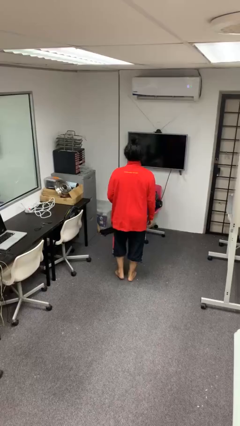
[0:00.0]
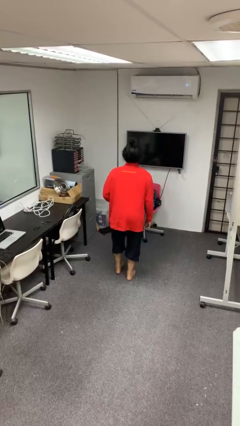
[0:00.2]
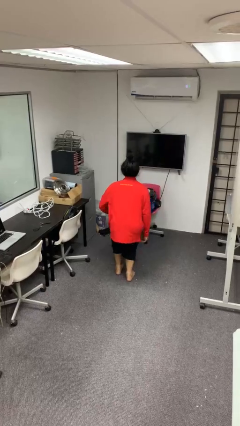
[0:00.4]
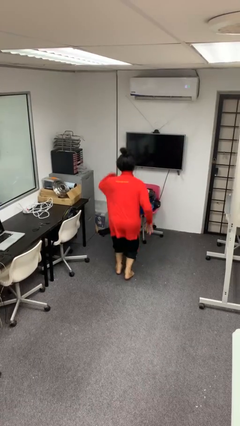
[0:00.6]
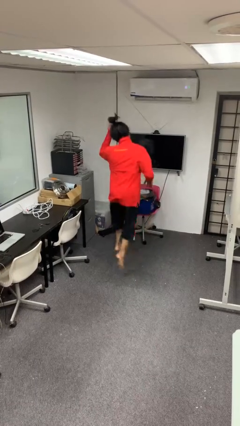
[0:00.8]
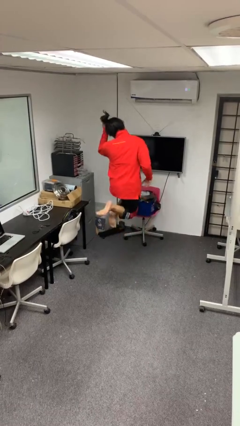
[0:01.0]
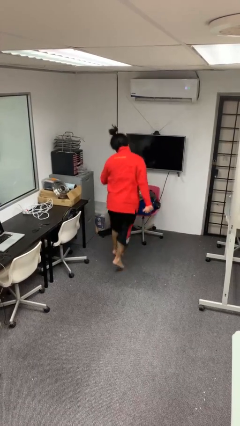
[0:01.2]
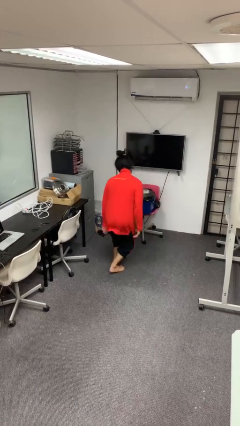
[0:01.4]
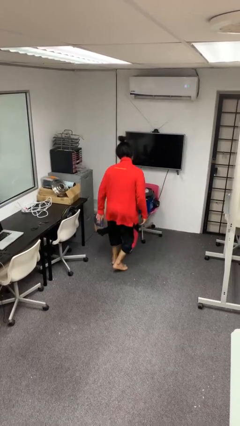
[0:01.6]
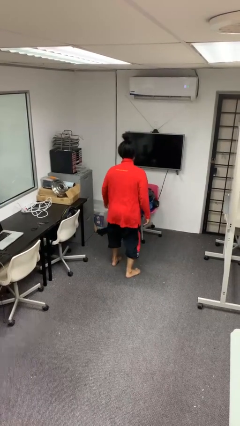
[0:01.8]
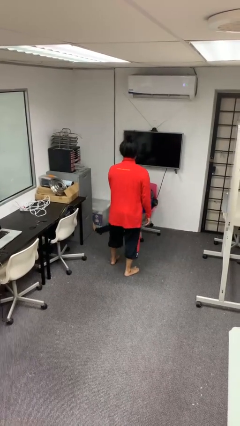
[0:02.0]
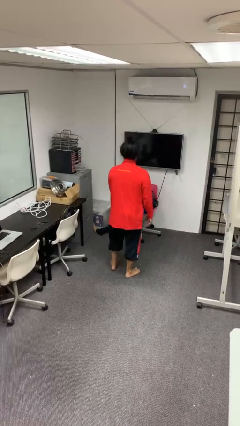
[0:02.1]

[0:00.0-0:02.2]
person jumps

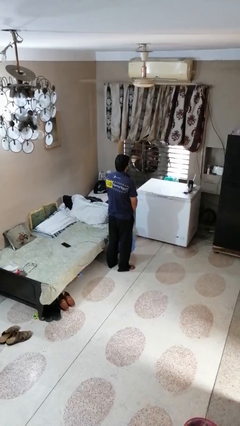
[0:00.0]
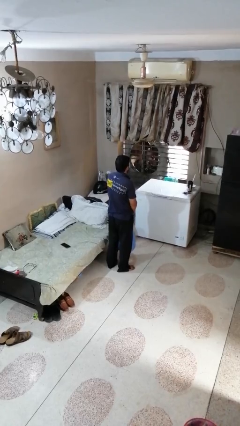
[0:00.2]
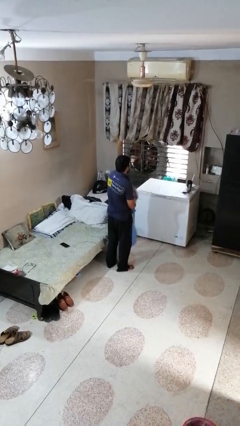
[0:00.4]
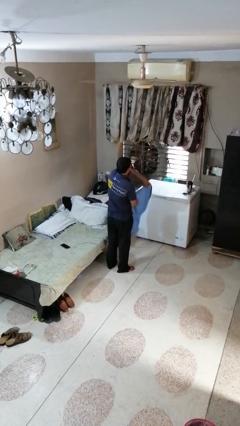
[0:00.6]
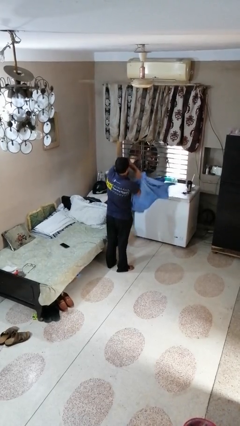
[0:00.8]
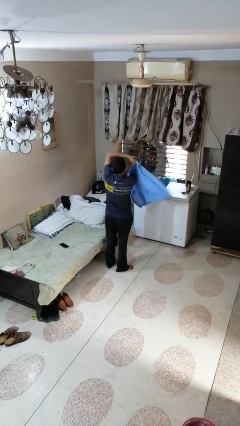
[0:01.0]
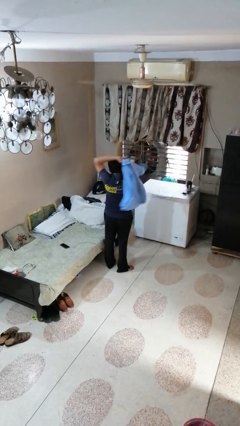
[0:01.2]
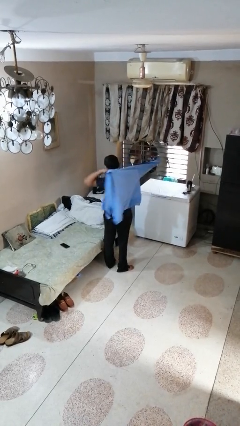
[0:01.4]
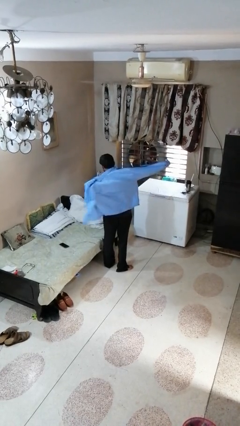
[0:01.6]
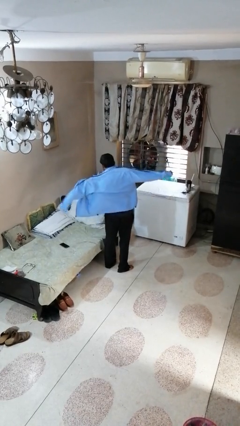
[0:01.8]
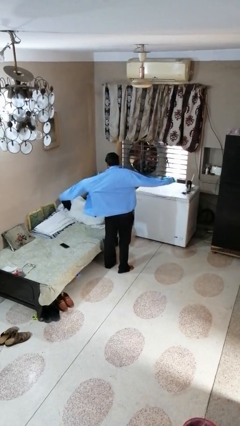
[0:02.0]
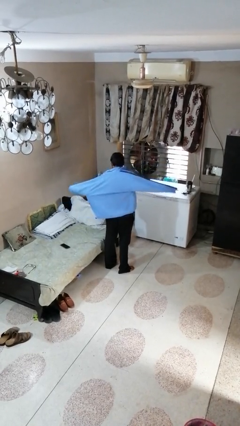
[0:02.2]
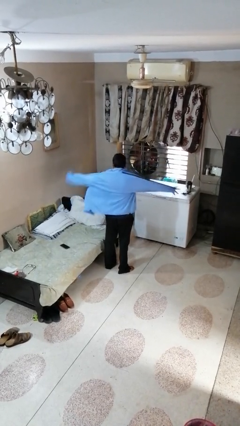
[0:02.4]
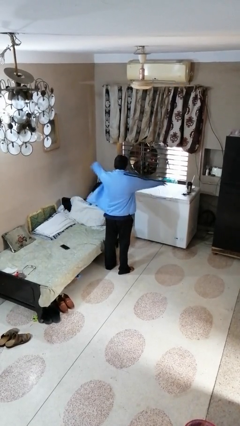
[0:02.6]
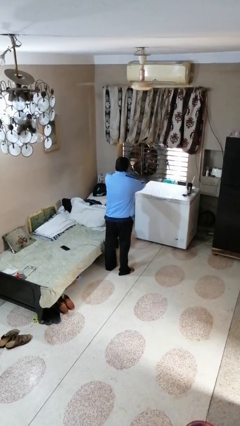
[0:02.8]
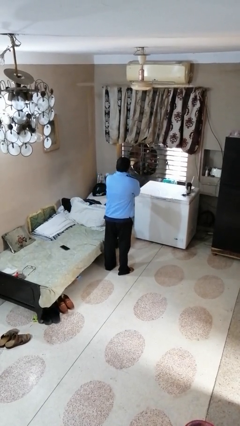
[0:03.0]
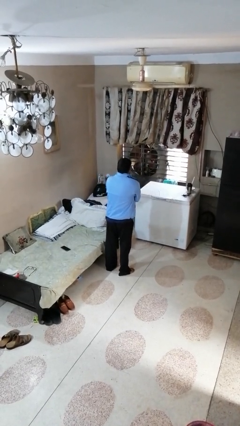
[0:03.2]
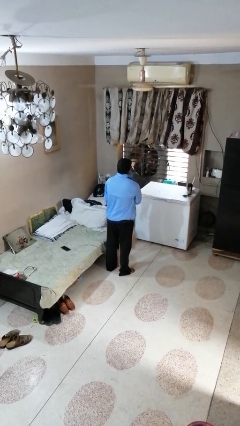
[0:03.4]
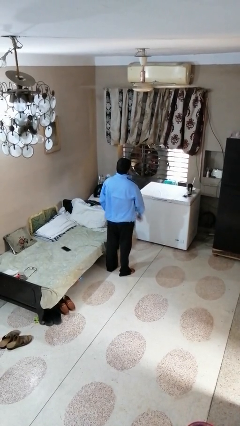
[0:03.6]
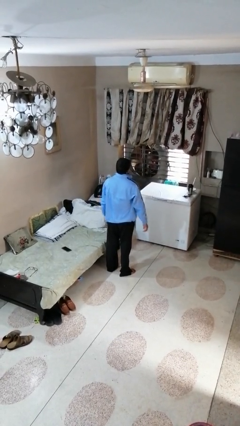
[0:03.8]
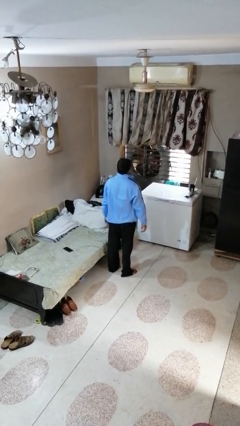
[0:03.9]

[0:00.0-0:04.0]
person puts on jacket

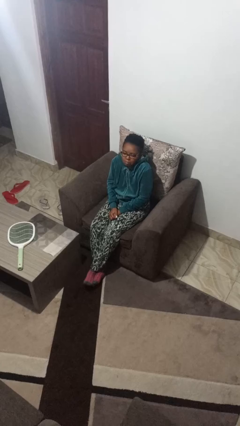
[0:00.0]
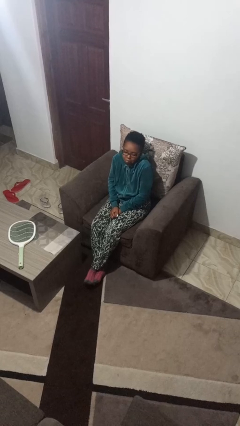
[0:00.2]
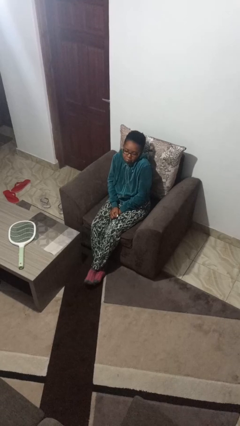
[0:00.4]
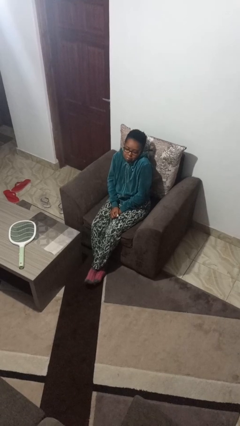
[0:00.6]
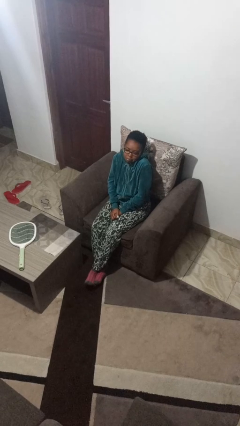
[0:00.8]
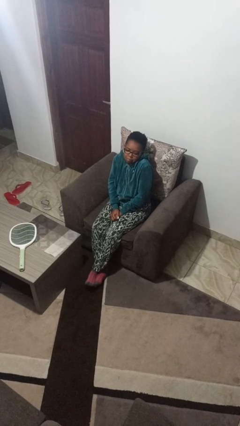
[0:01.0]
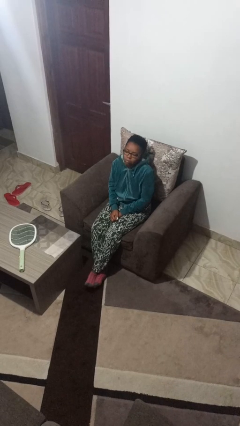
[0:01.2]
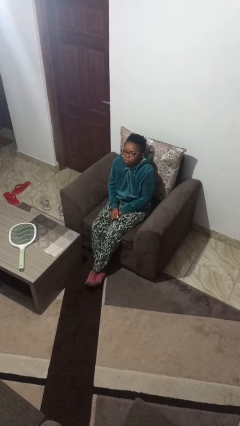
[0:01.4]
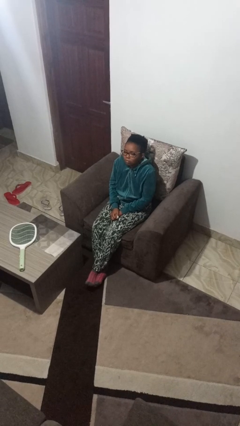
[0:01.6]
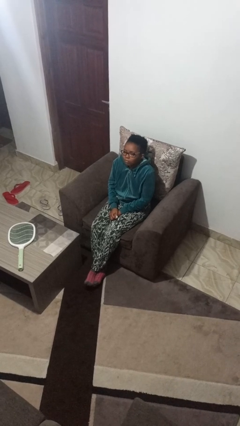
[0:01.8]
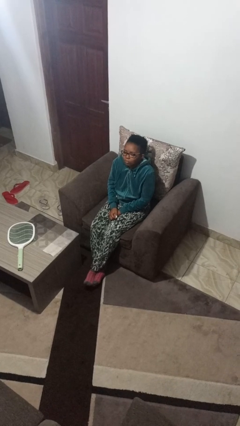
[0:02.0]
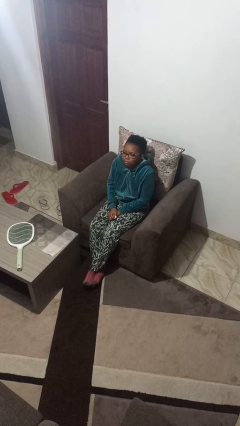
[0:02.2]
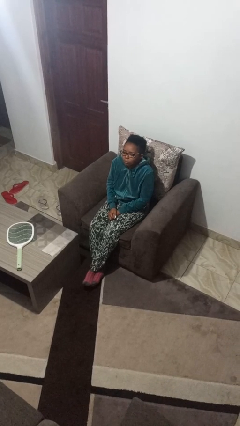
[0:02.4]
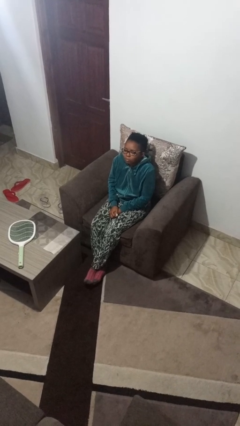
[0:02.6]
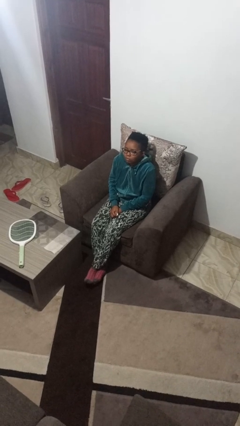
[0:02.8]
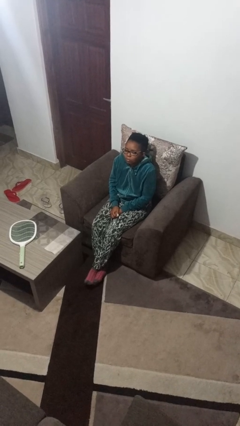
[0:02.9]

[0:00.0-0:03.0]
person shrugs

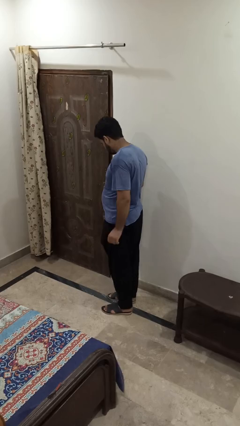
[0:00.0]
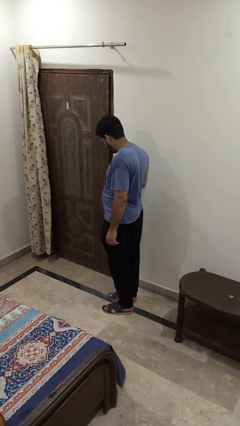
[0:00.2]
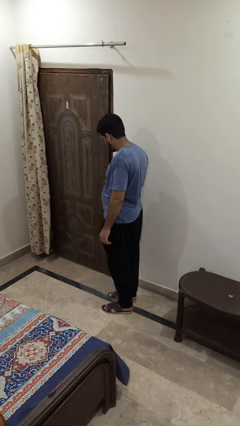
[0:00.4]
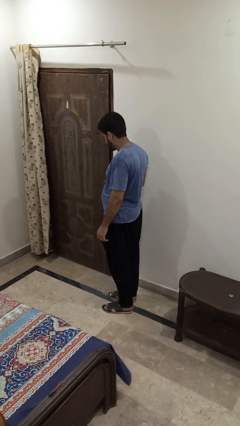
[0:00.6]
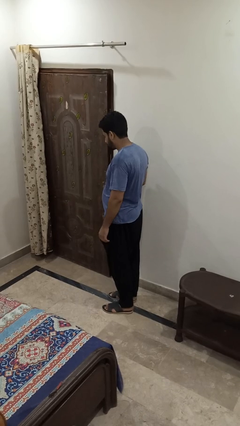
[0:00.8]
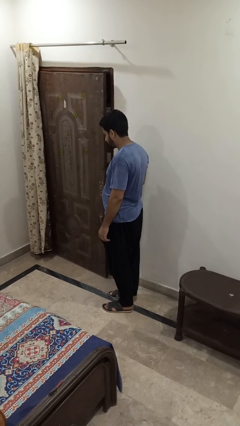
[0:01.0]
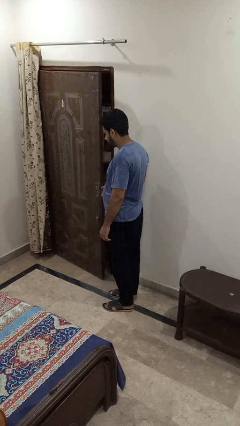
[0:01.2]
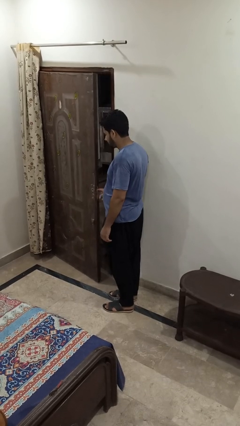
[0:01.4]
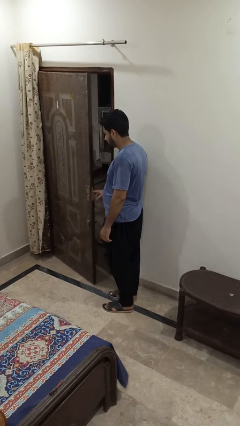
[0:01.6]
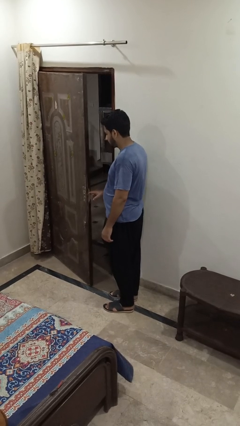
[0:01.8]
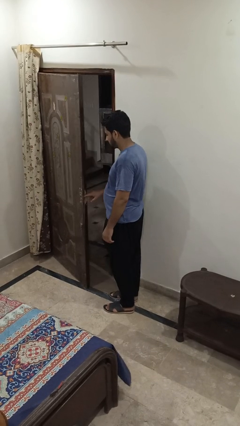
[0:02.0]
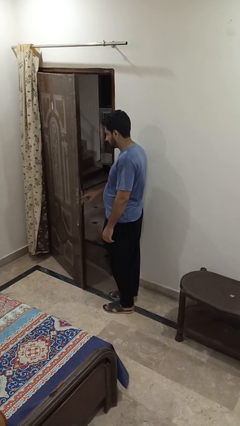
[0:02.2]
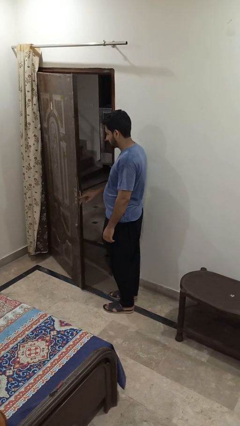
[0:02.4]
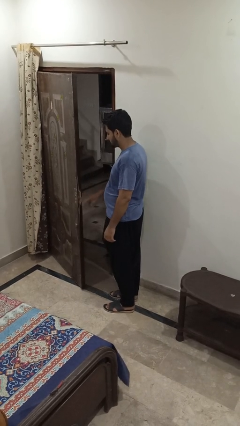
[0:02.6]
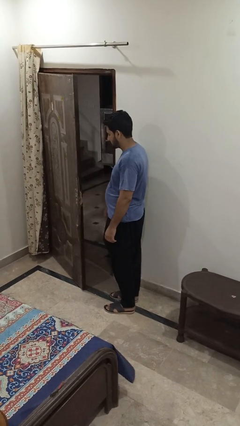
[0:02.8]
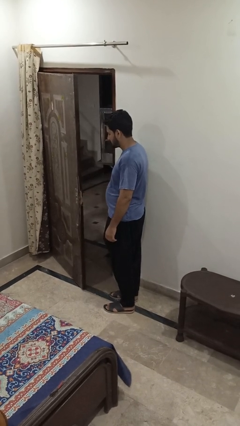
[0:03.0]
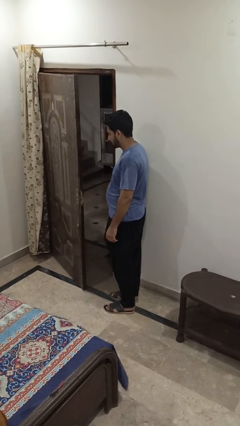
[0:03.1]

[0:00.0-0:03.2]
person opens facility door

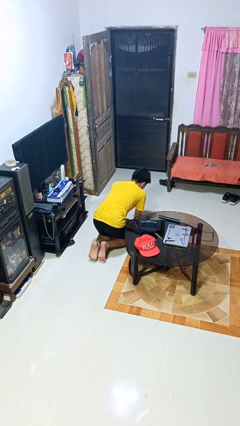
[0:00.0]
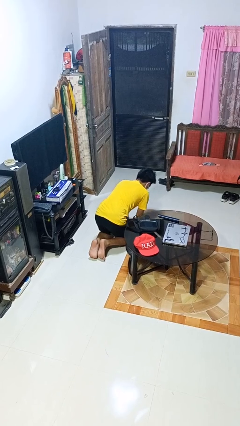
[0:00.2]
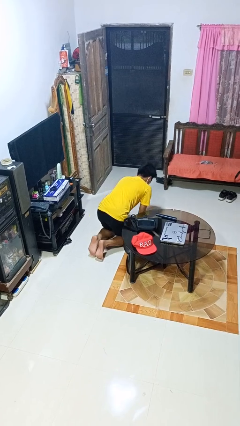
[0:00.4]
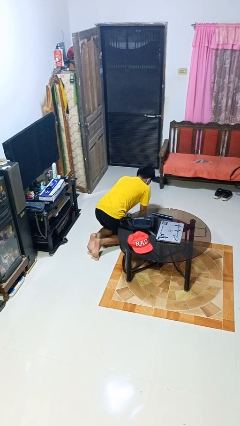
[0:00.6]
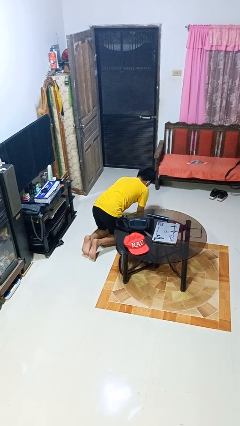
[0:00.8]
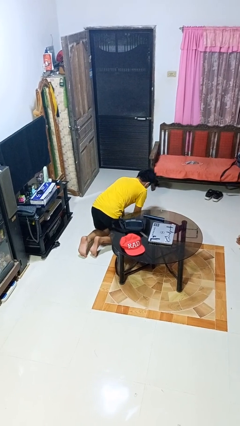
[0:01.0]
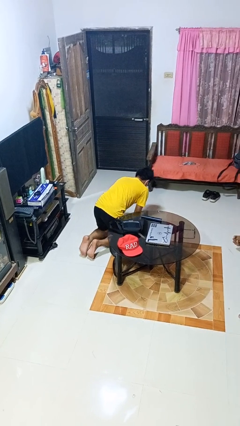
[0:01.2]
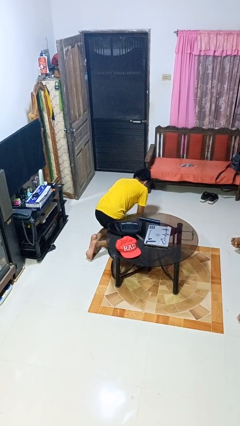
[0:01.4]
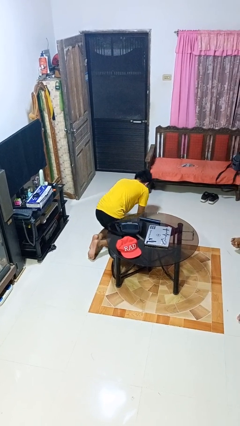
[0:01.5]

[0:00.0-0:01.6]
person crawls

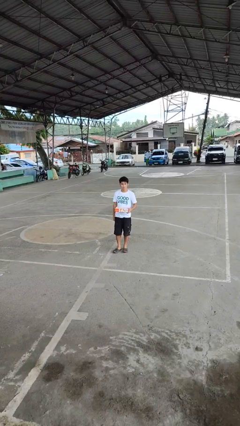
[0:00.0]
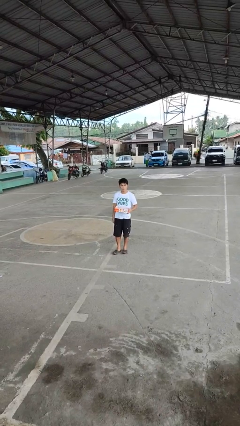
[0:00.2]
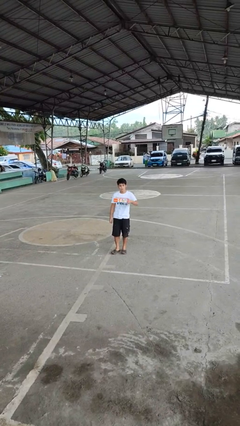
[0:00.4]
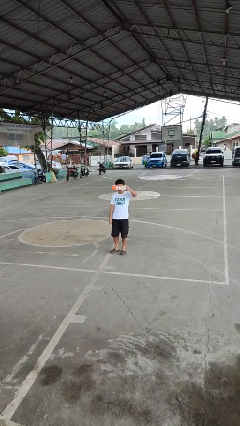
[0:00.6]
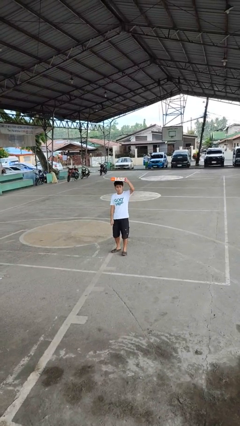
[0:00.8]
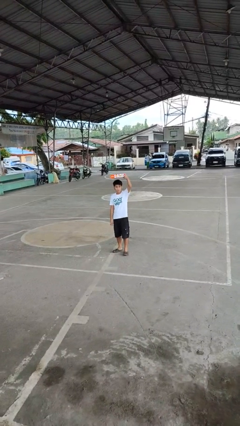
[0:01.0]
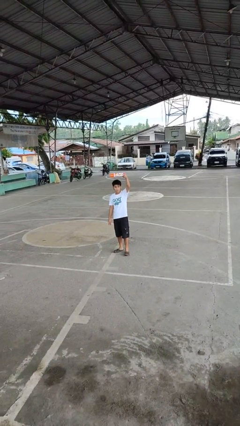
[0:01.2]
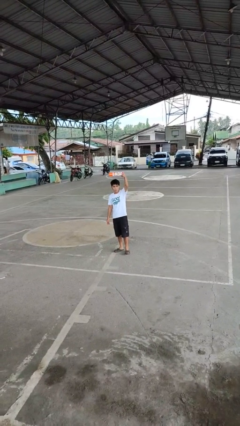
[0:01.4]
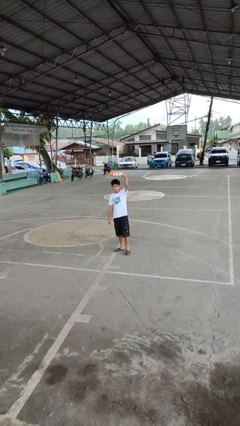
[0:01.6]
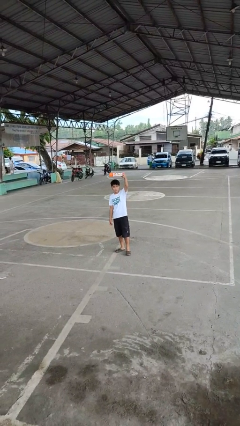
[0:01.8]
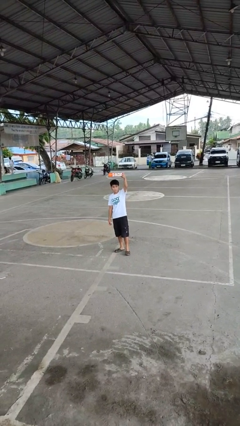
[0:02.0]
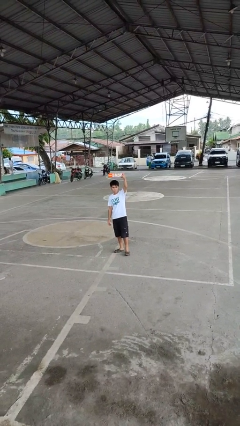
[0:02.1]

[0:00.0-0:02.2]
person holds object above head

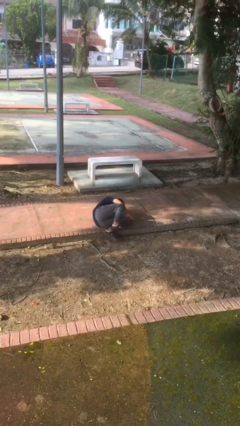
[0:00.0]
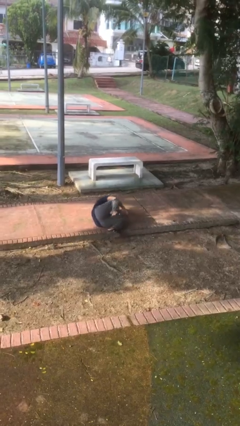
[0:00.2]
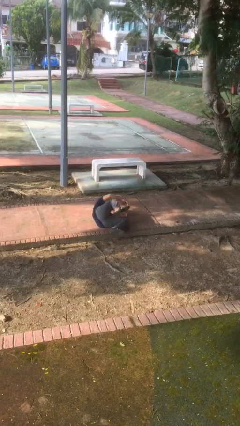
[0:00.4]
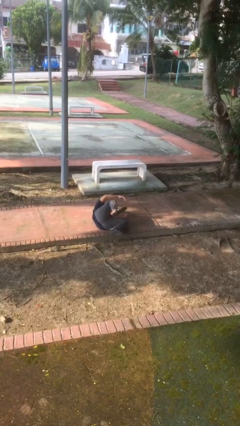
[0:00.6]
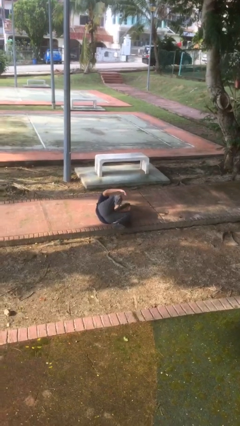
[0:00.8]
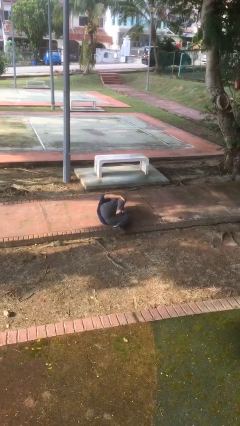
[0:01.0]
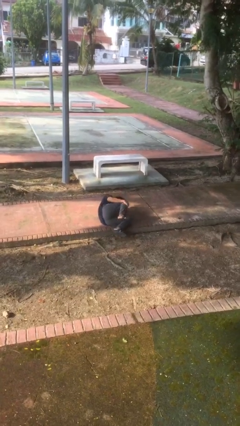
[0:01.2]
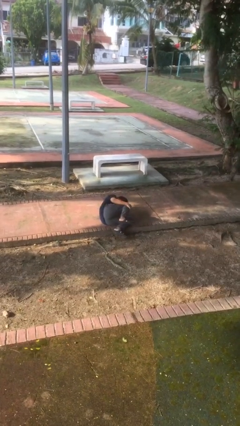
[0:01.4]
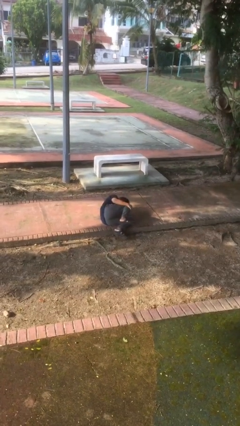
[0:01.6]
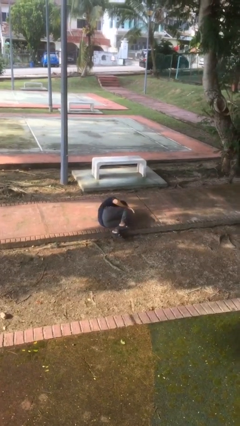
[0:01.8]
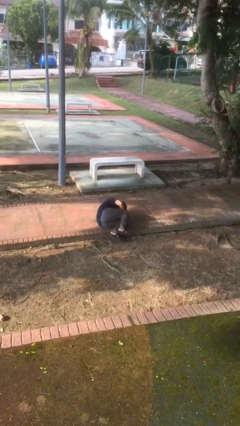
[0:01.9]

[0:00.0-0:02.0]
person lies down on floor
